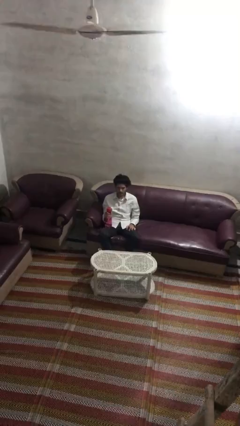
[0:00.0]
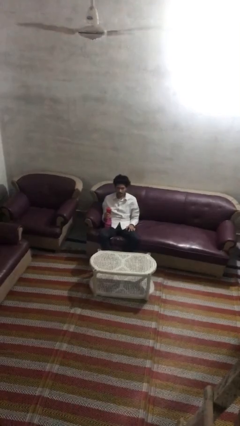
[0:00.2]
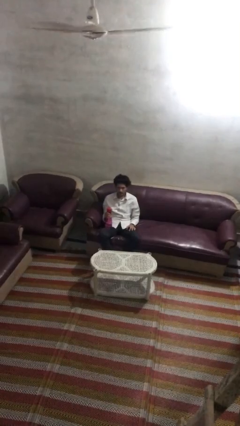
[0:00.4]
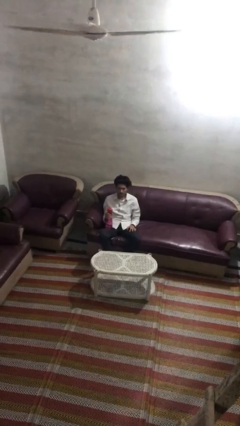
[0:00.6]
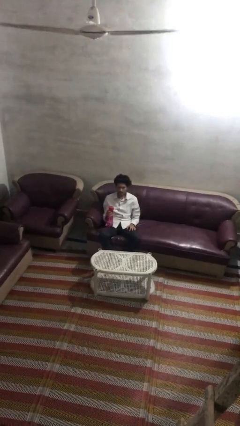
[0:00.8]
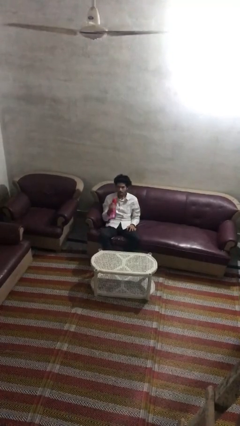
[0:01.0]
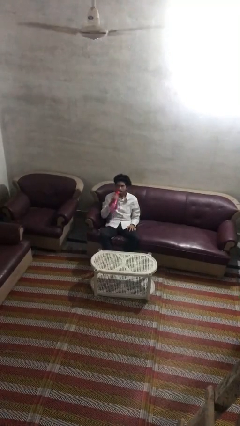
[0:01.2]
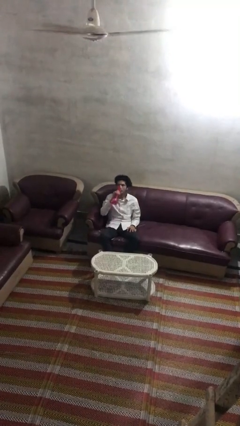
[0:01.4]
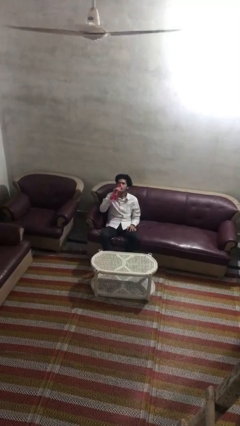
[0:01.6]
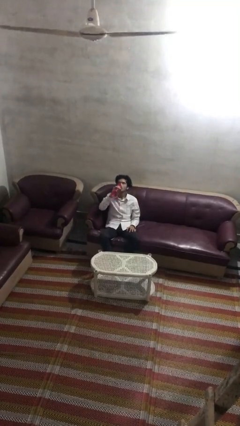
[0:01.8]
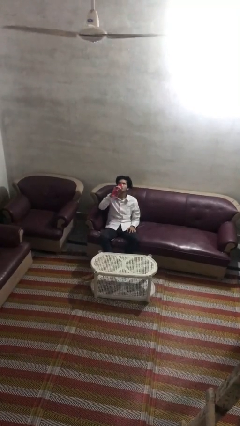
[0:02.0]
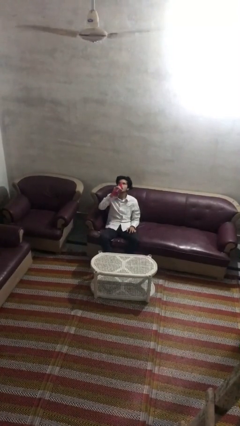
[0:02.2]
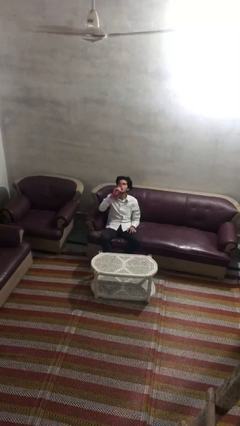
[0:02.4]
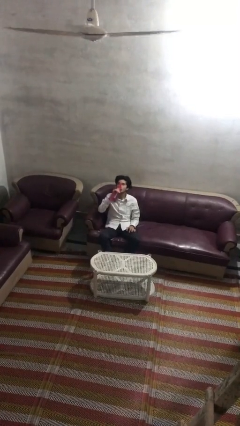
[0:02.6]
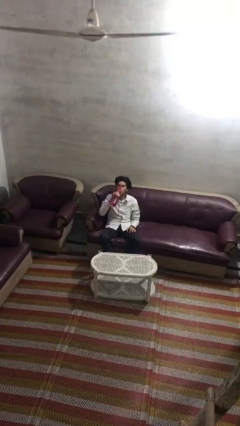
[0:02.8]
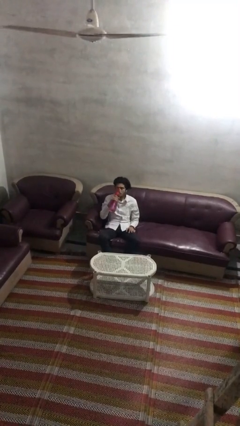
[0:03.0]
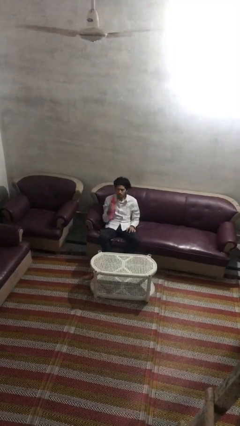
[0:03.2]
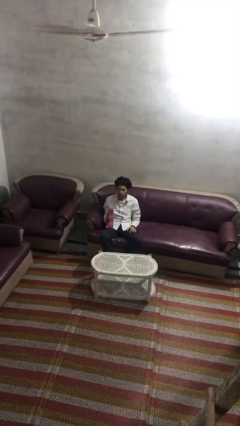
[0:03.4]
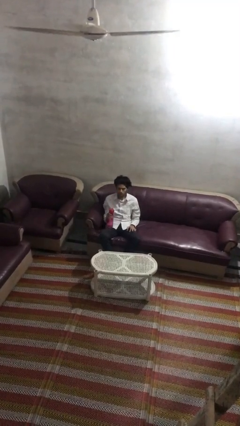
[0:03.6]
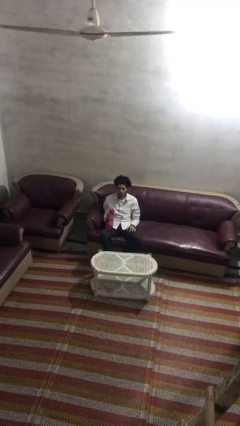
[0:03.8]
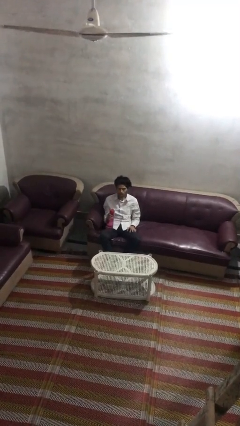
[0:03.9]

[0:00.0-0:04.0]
person drinks from bottle

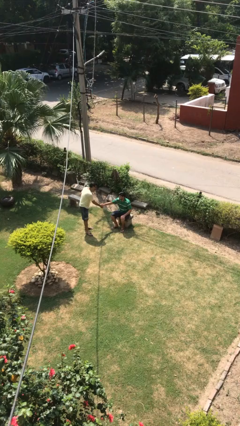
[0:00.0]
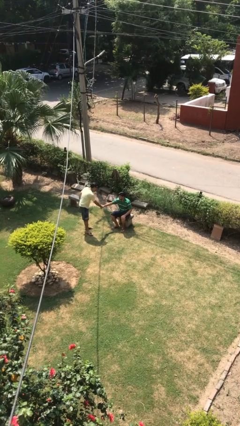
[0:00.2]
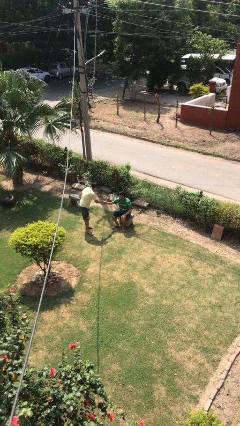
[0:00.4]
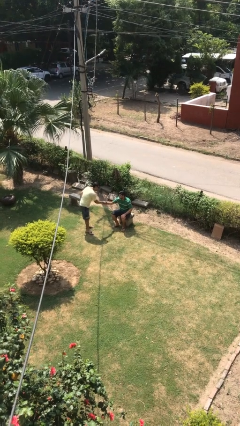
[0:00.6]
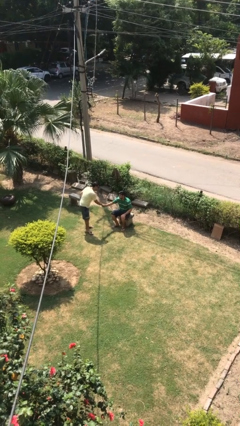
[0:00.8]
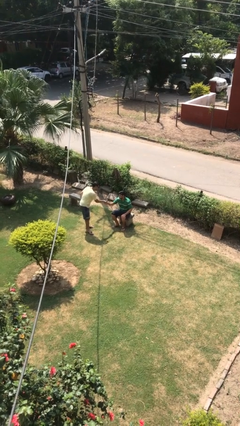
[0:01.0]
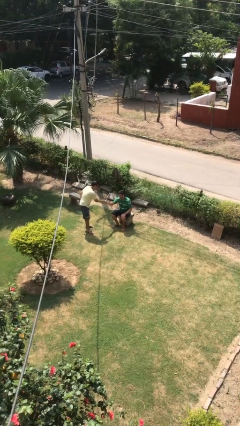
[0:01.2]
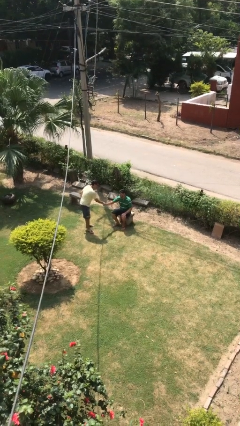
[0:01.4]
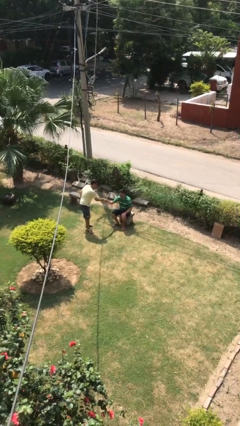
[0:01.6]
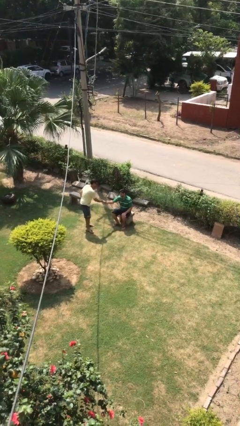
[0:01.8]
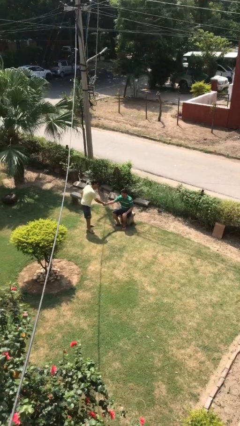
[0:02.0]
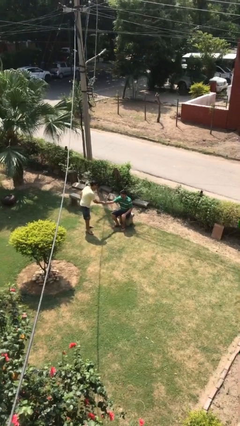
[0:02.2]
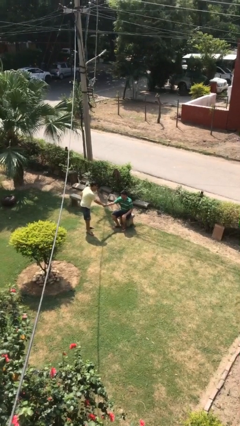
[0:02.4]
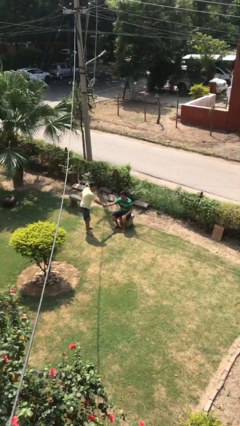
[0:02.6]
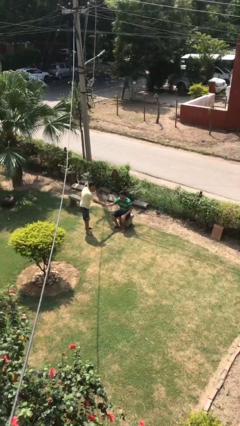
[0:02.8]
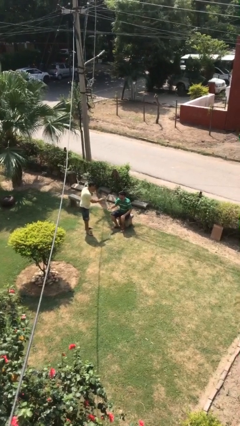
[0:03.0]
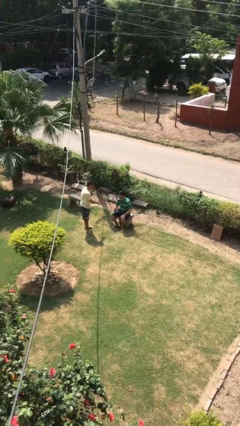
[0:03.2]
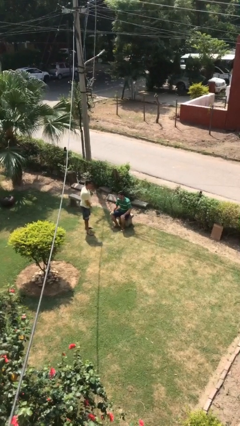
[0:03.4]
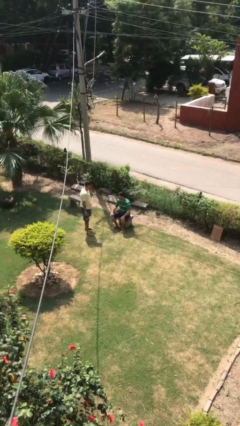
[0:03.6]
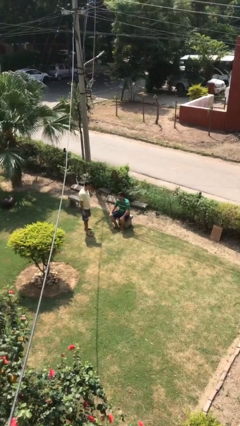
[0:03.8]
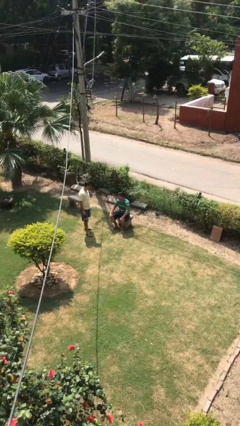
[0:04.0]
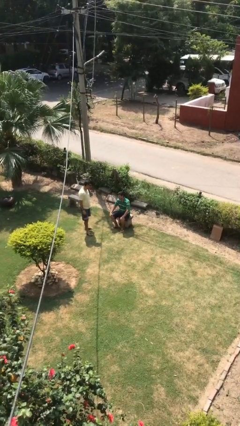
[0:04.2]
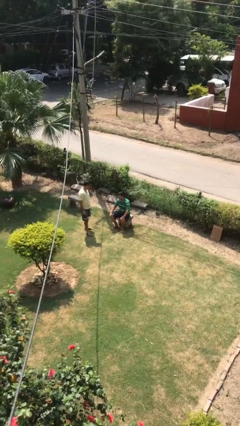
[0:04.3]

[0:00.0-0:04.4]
person shakes hand

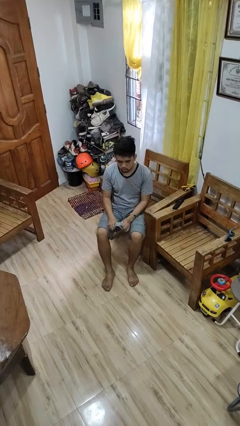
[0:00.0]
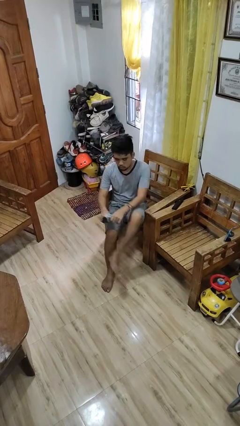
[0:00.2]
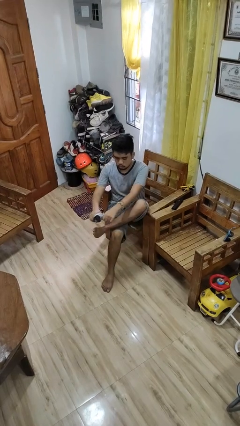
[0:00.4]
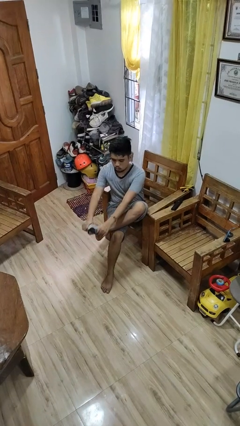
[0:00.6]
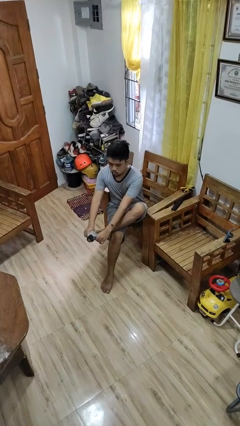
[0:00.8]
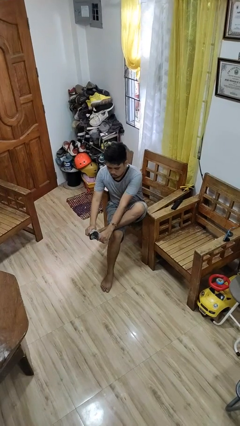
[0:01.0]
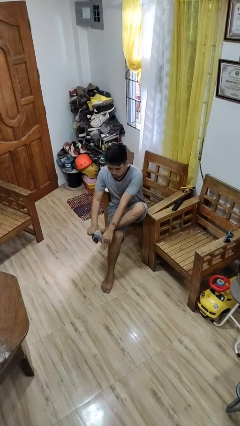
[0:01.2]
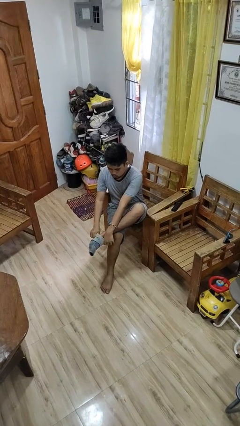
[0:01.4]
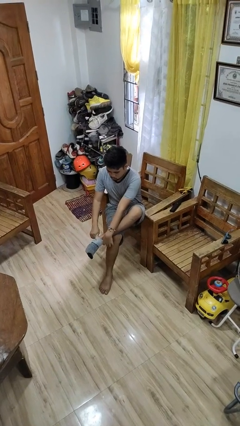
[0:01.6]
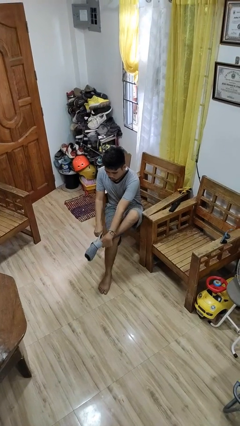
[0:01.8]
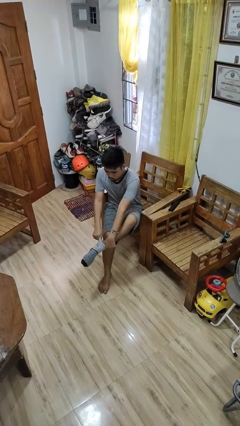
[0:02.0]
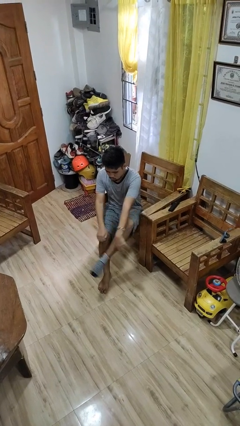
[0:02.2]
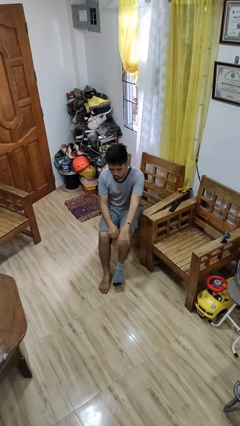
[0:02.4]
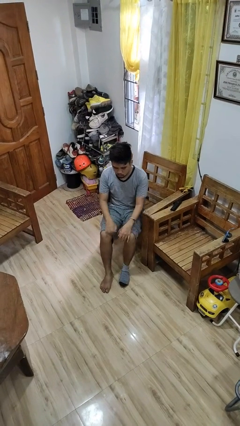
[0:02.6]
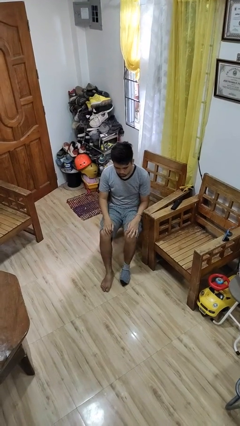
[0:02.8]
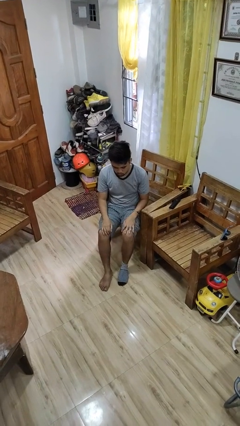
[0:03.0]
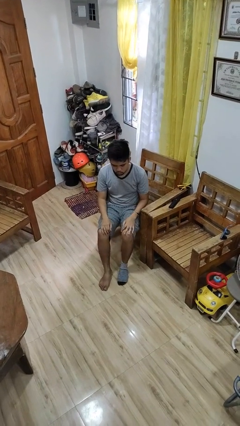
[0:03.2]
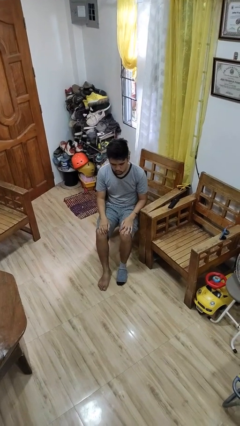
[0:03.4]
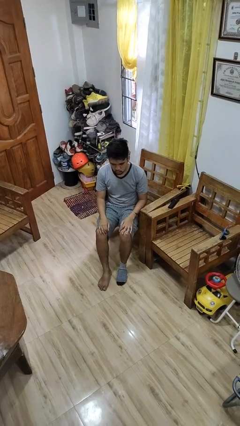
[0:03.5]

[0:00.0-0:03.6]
person puts on socks

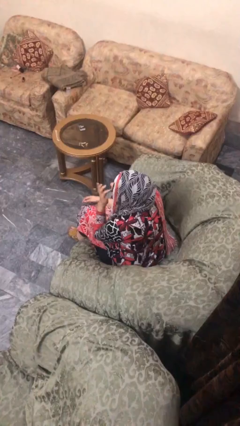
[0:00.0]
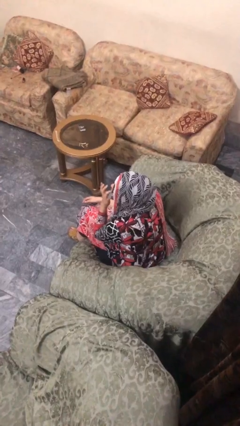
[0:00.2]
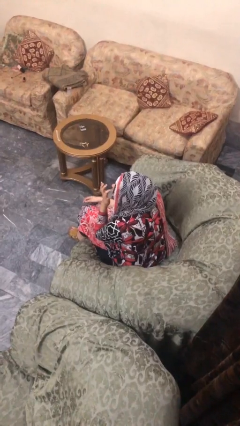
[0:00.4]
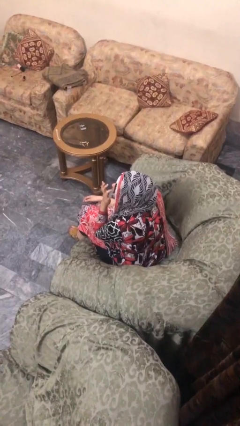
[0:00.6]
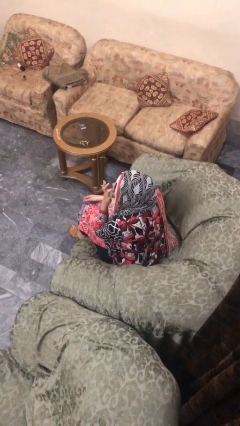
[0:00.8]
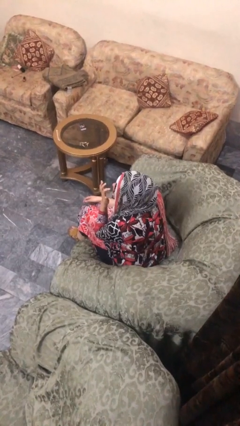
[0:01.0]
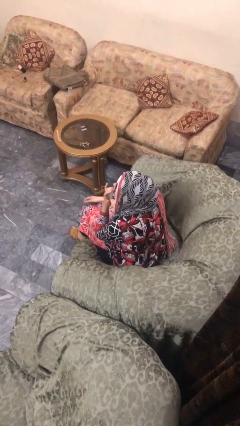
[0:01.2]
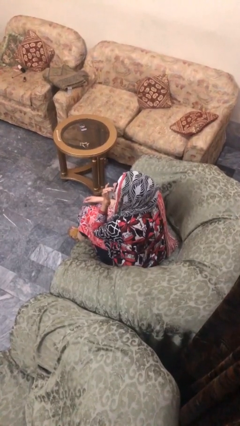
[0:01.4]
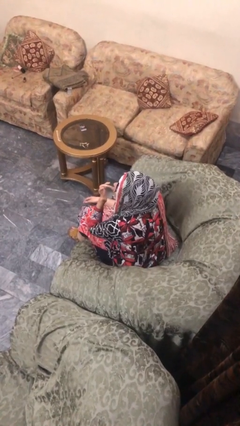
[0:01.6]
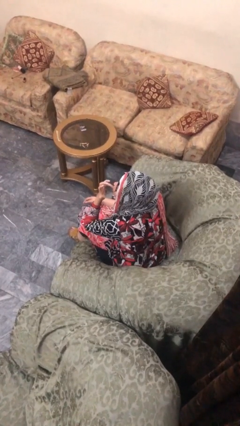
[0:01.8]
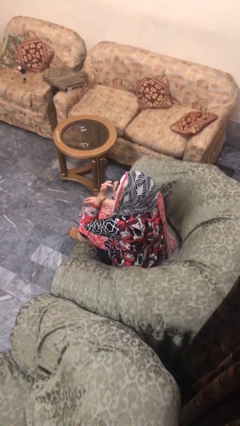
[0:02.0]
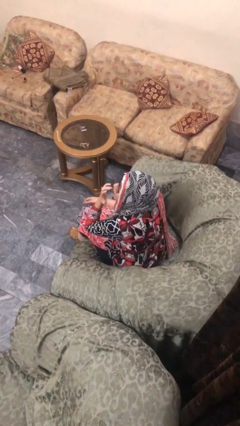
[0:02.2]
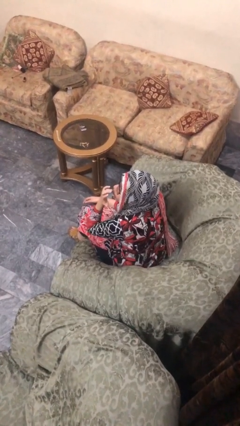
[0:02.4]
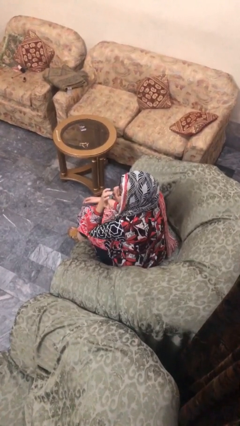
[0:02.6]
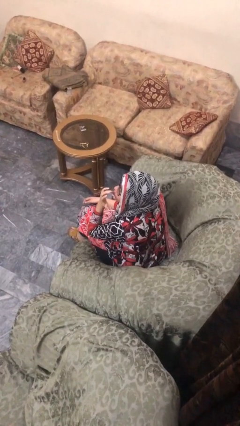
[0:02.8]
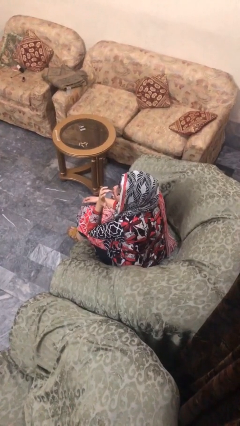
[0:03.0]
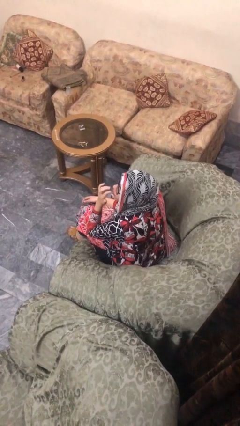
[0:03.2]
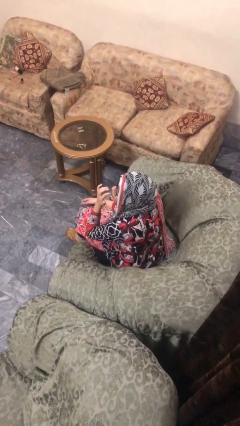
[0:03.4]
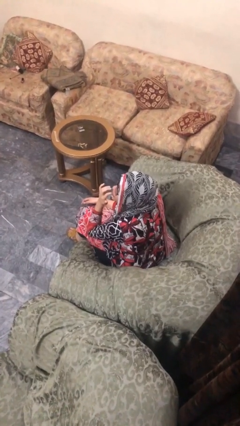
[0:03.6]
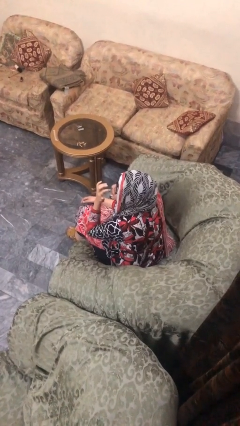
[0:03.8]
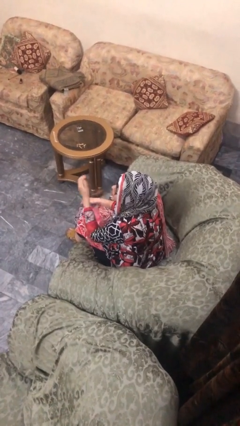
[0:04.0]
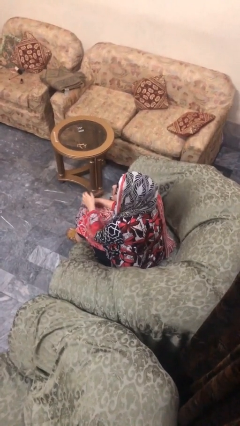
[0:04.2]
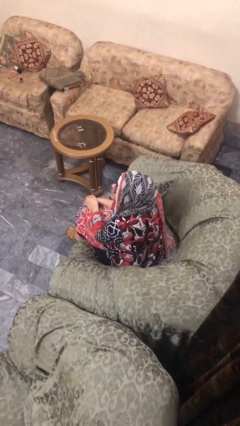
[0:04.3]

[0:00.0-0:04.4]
person licks fingers

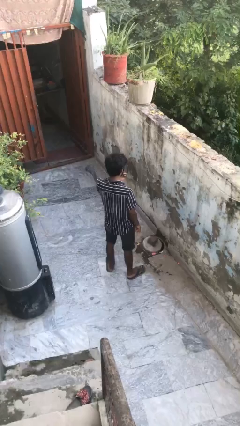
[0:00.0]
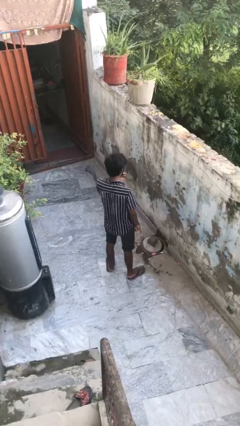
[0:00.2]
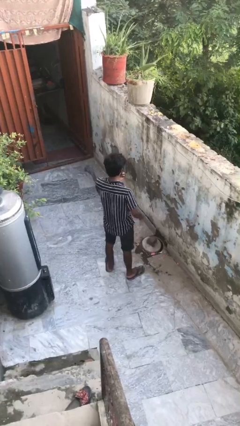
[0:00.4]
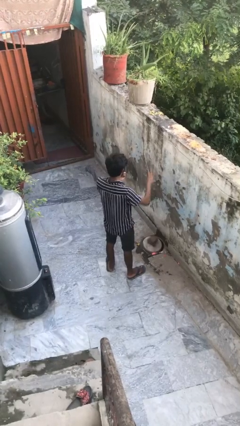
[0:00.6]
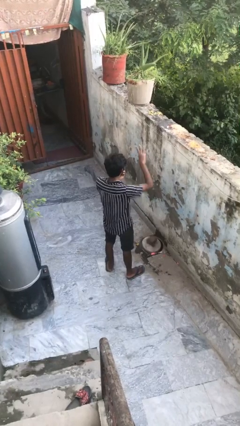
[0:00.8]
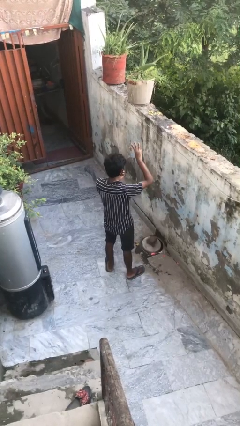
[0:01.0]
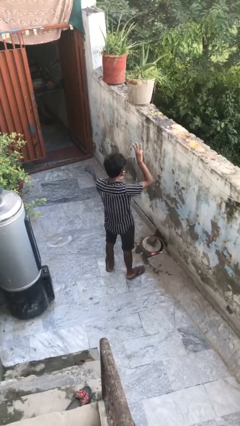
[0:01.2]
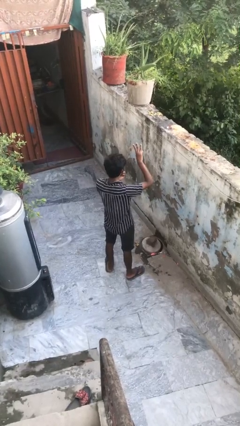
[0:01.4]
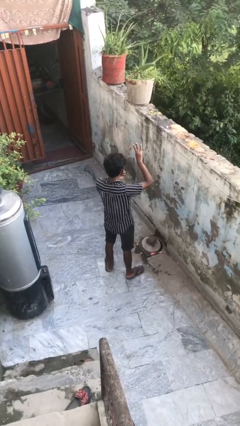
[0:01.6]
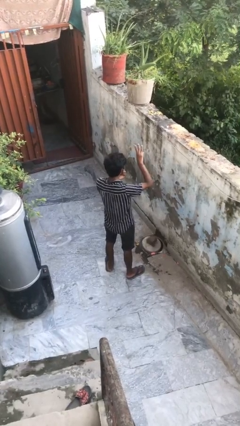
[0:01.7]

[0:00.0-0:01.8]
person gestures number three
